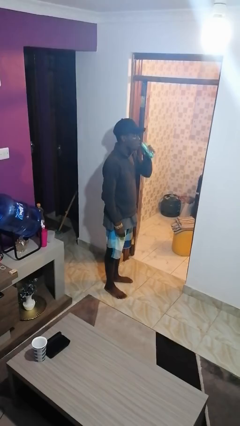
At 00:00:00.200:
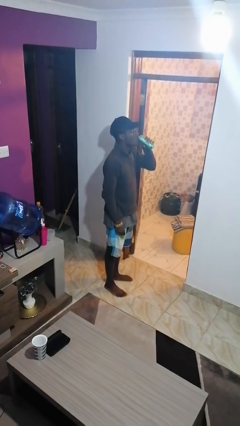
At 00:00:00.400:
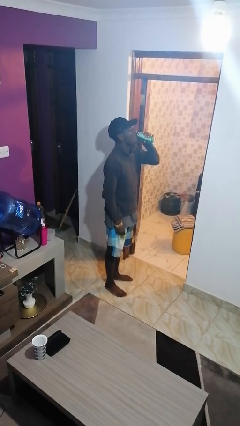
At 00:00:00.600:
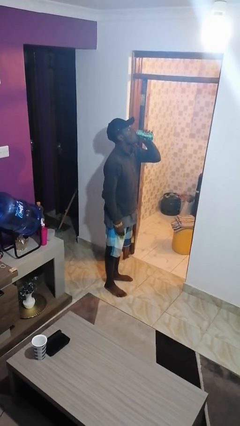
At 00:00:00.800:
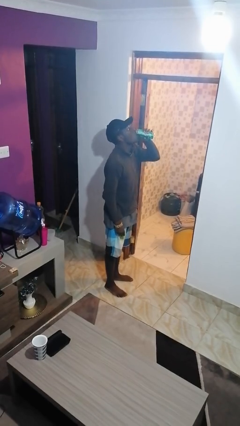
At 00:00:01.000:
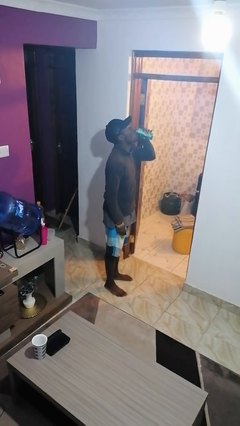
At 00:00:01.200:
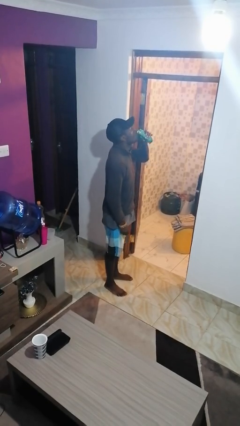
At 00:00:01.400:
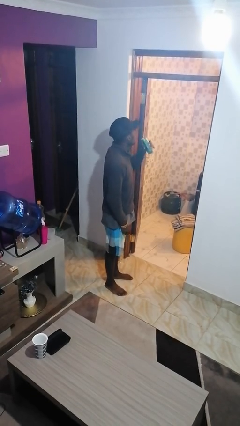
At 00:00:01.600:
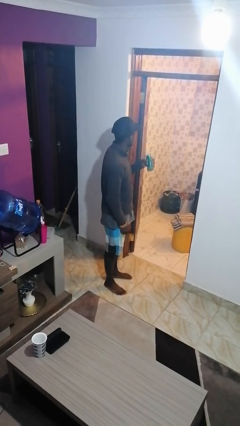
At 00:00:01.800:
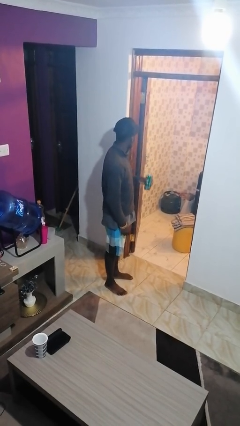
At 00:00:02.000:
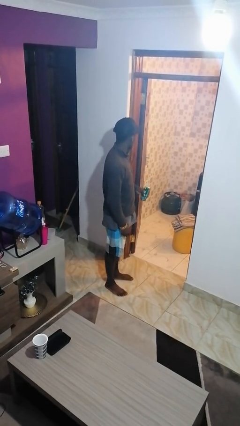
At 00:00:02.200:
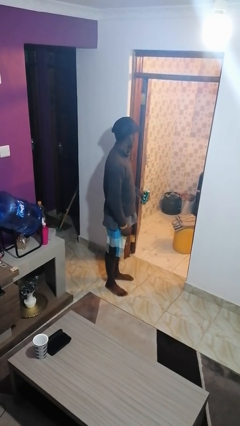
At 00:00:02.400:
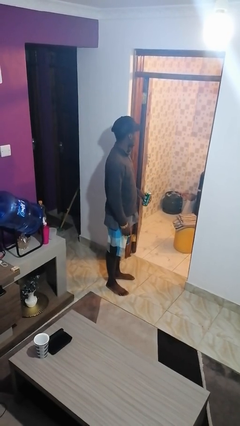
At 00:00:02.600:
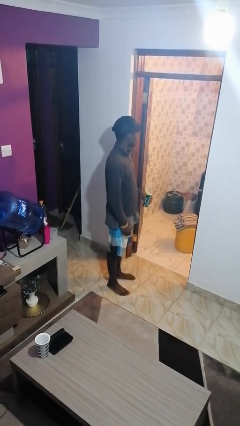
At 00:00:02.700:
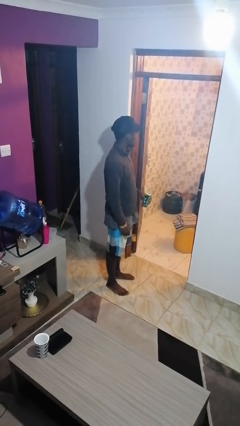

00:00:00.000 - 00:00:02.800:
person drinks from beverage can

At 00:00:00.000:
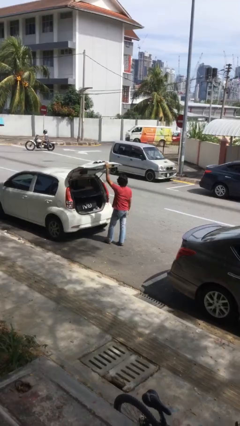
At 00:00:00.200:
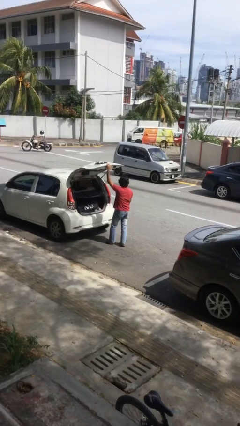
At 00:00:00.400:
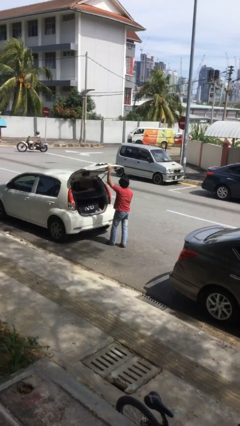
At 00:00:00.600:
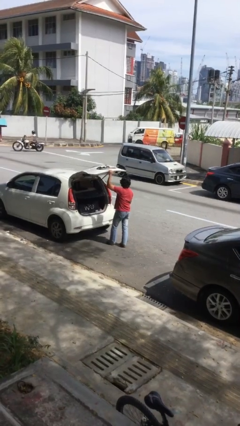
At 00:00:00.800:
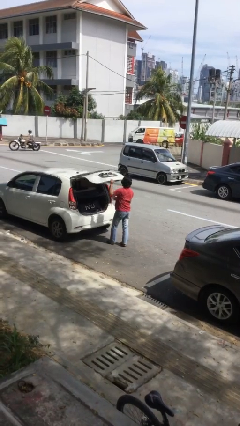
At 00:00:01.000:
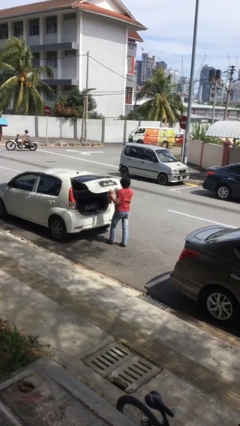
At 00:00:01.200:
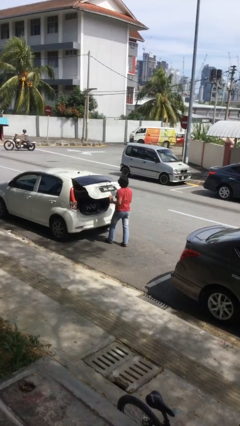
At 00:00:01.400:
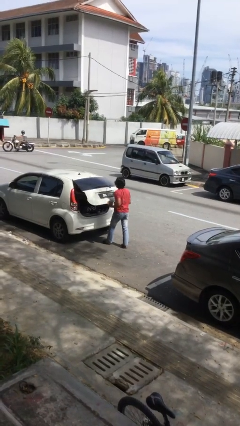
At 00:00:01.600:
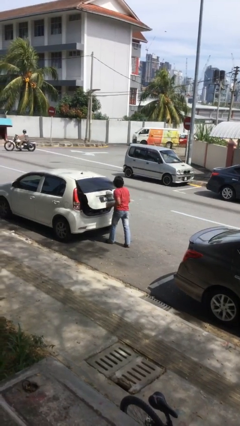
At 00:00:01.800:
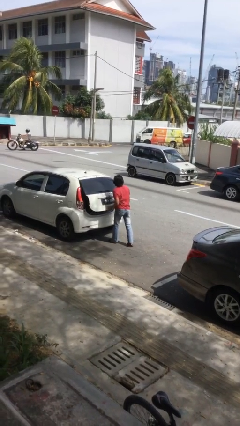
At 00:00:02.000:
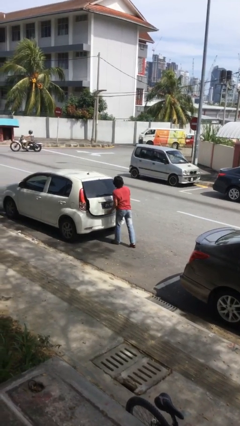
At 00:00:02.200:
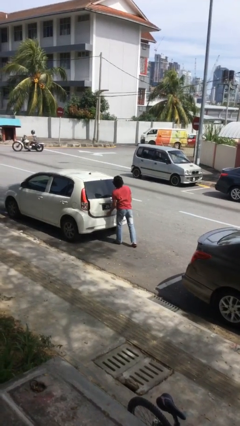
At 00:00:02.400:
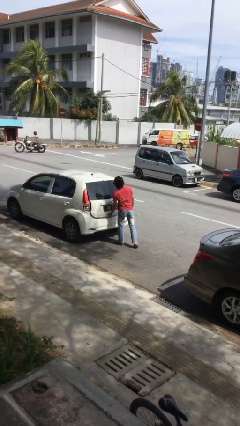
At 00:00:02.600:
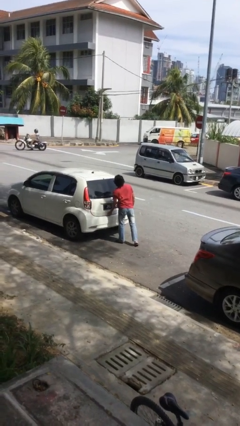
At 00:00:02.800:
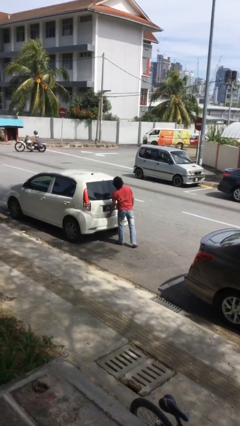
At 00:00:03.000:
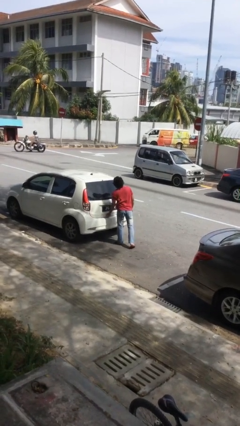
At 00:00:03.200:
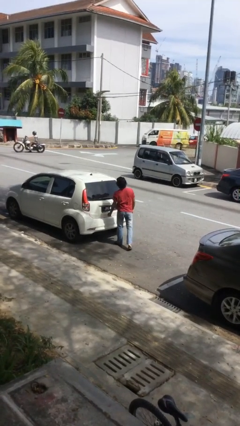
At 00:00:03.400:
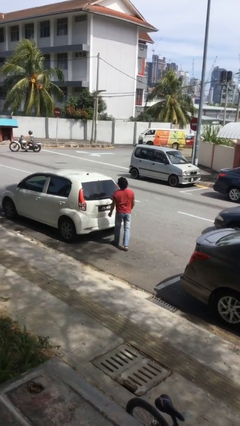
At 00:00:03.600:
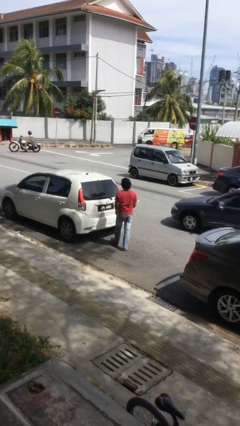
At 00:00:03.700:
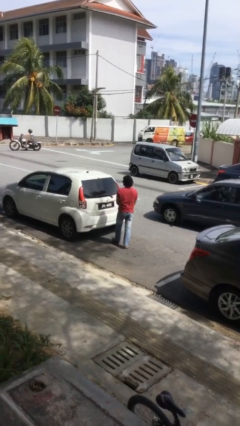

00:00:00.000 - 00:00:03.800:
person closes car trunk

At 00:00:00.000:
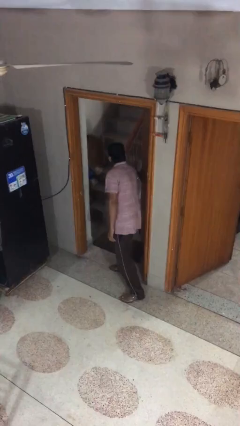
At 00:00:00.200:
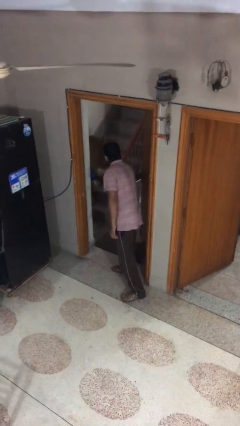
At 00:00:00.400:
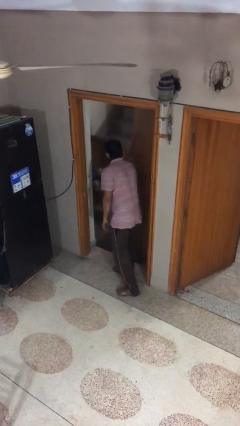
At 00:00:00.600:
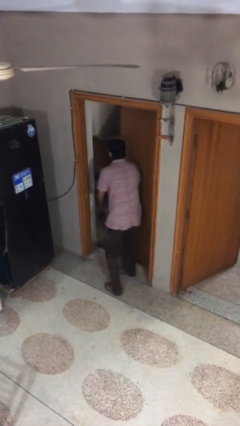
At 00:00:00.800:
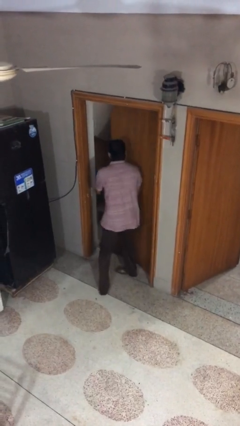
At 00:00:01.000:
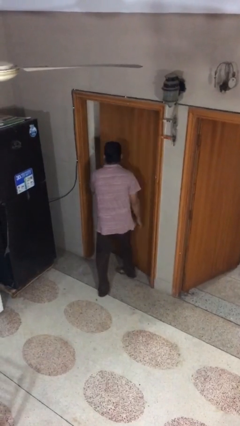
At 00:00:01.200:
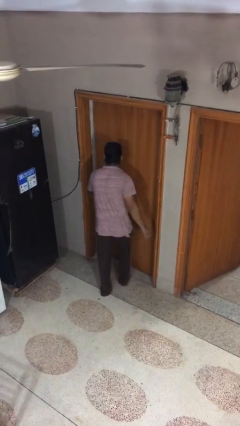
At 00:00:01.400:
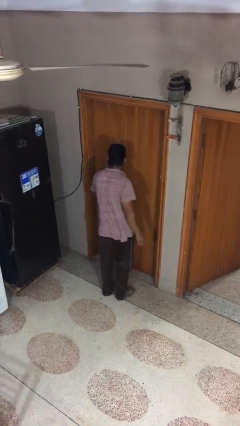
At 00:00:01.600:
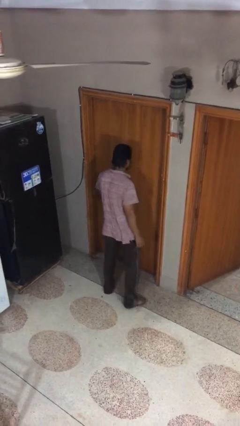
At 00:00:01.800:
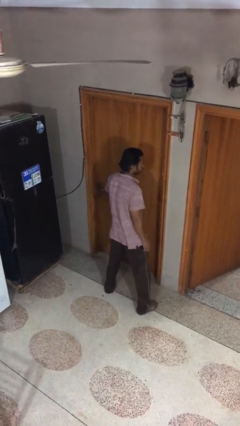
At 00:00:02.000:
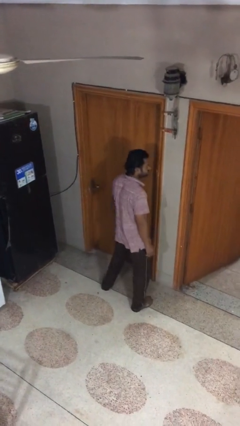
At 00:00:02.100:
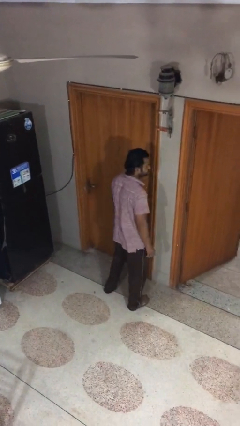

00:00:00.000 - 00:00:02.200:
person closes facility door

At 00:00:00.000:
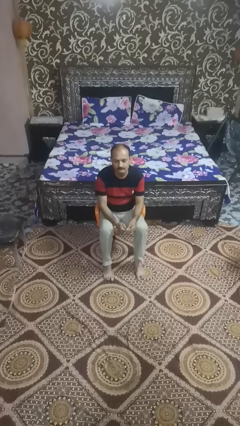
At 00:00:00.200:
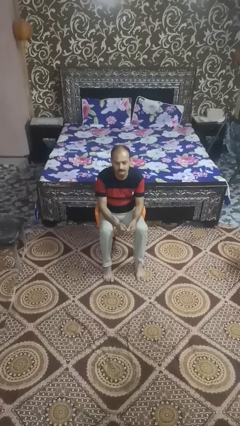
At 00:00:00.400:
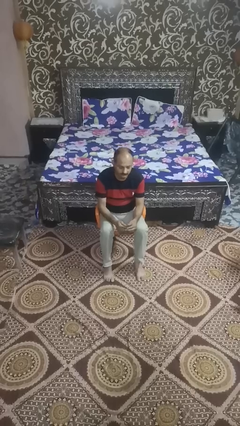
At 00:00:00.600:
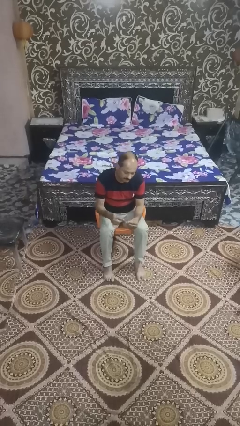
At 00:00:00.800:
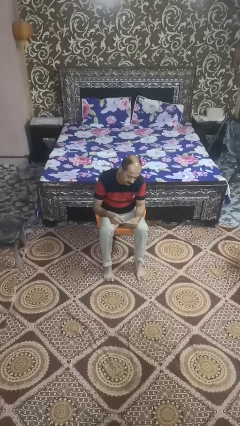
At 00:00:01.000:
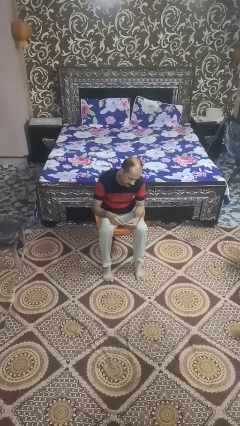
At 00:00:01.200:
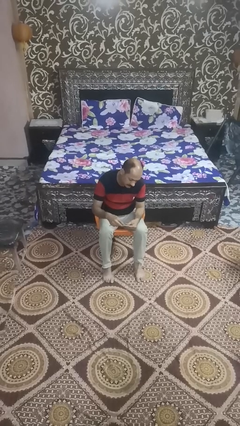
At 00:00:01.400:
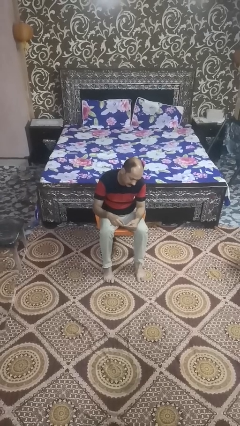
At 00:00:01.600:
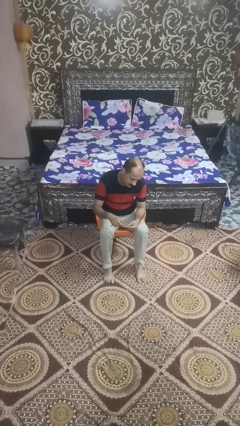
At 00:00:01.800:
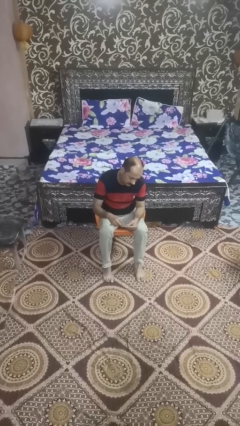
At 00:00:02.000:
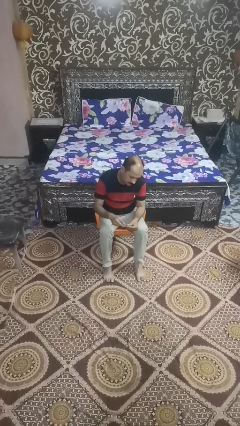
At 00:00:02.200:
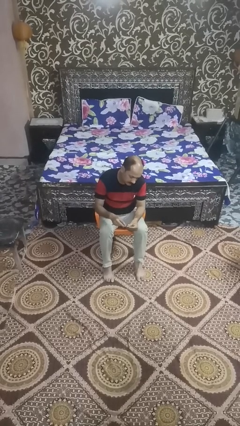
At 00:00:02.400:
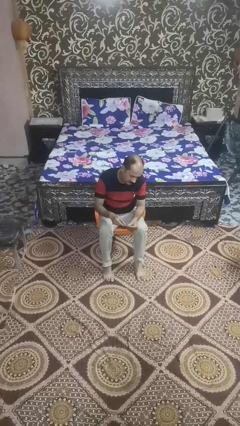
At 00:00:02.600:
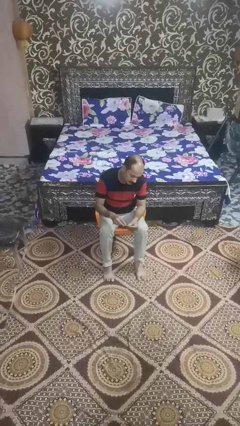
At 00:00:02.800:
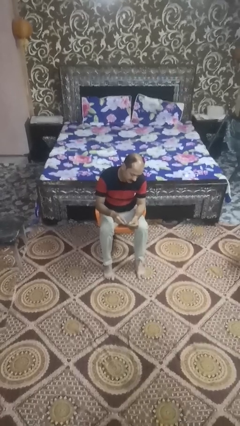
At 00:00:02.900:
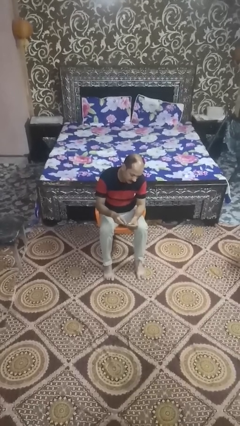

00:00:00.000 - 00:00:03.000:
person files fingernails

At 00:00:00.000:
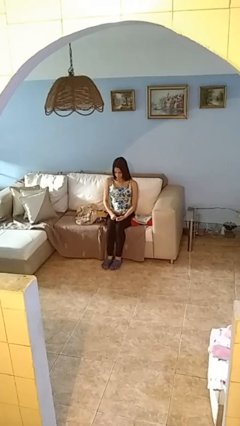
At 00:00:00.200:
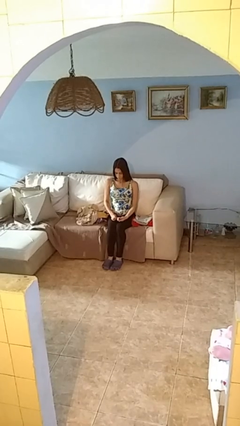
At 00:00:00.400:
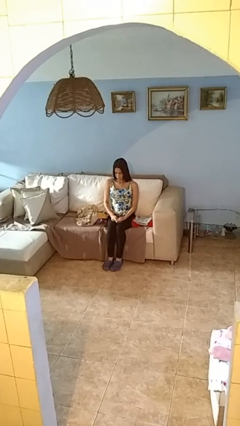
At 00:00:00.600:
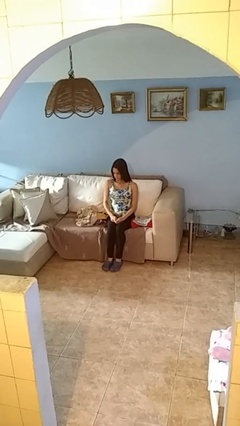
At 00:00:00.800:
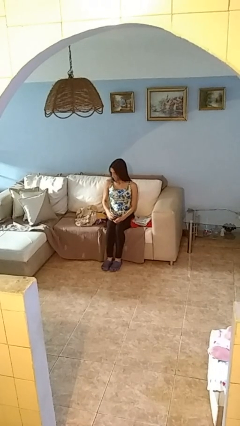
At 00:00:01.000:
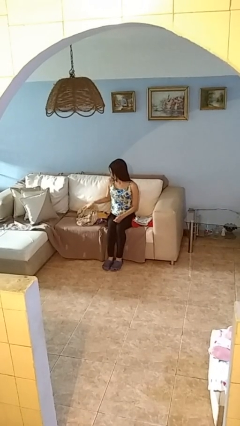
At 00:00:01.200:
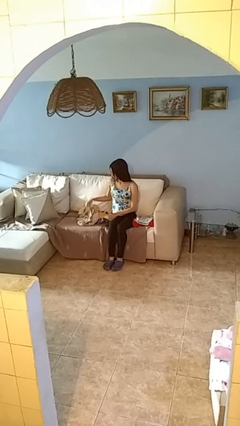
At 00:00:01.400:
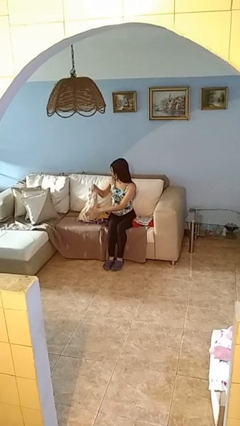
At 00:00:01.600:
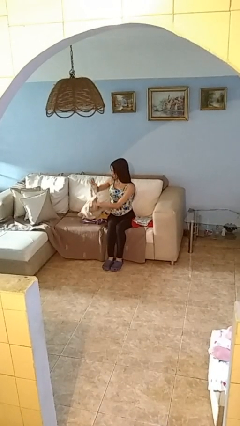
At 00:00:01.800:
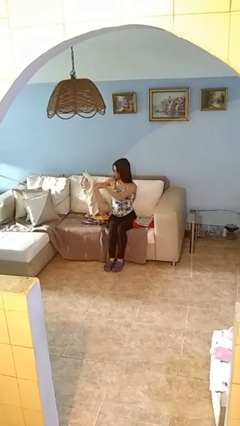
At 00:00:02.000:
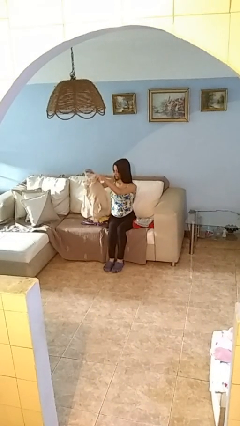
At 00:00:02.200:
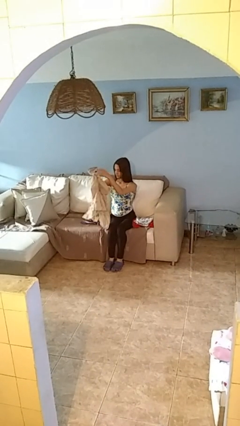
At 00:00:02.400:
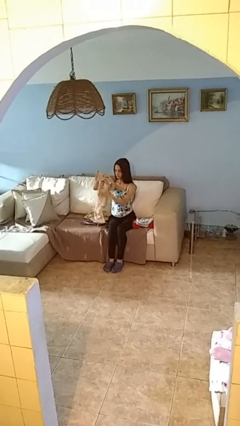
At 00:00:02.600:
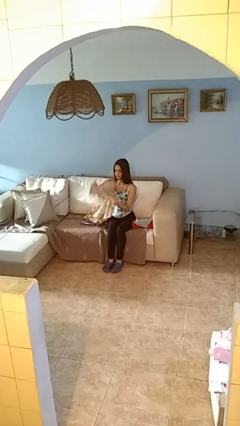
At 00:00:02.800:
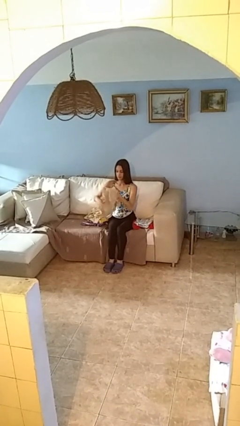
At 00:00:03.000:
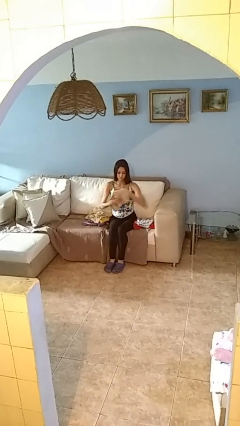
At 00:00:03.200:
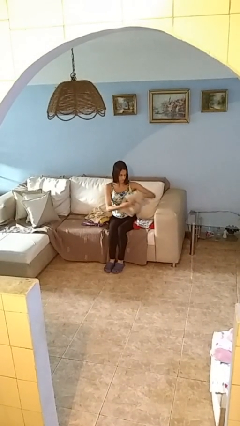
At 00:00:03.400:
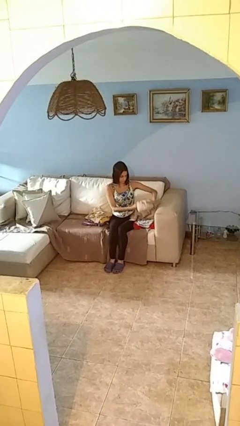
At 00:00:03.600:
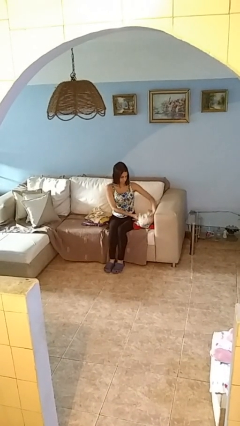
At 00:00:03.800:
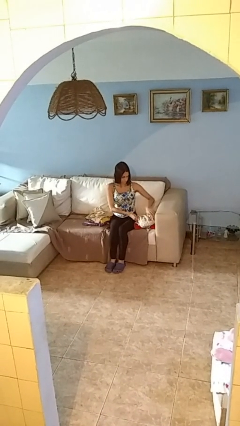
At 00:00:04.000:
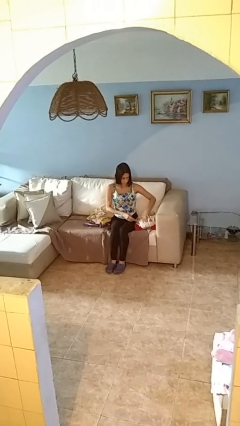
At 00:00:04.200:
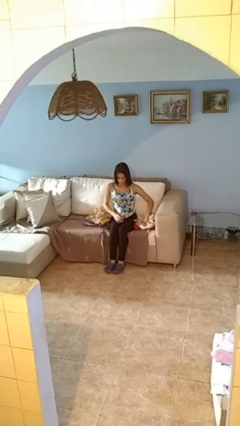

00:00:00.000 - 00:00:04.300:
person folds shirt

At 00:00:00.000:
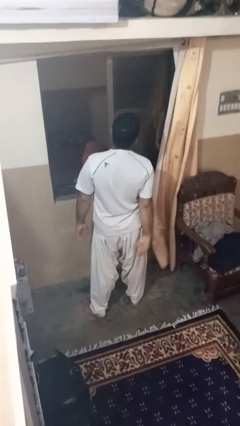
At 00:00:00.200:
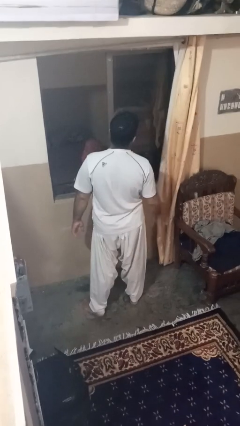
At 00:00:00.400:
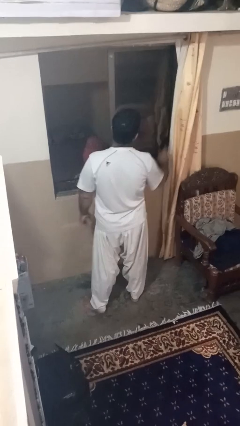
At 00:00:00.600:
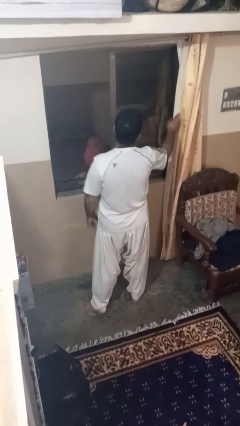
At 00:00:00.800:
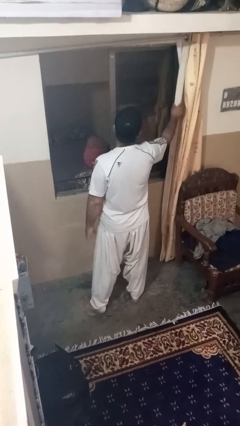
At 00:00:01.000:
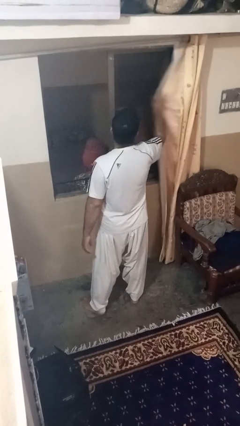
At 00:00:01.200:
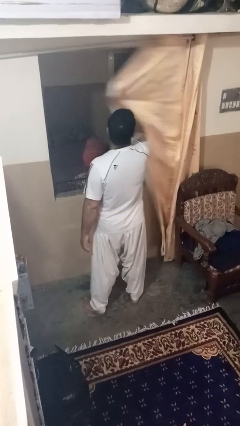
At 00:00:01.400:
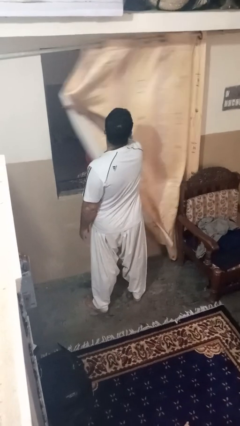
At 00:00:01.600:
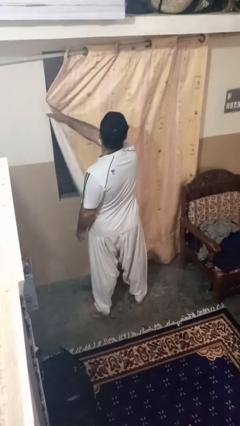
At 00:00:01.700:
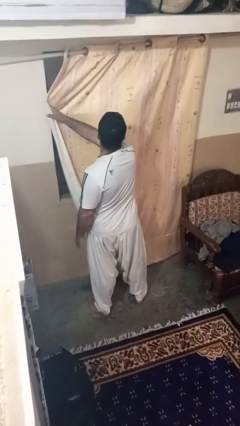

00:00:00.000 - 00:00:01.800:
person closes curtains
